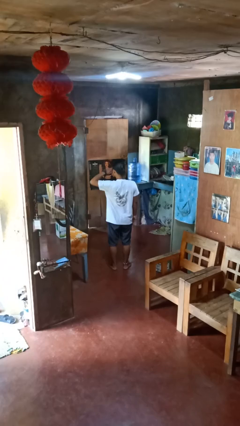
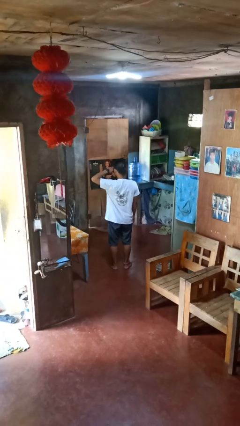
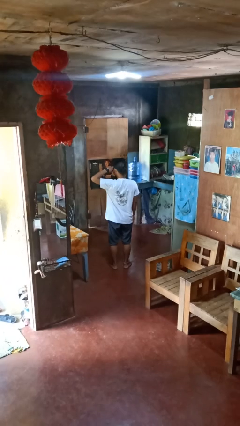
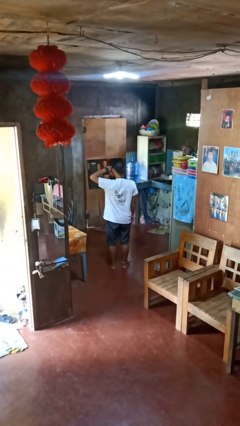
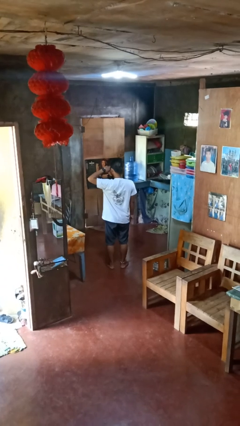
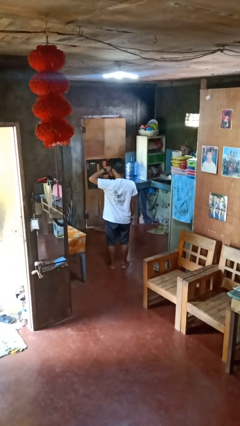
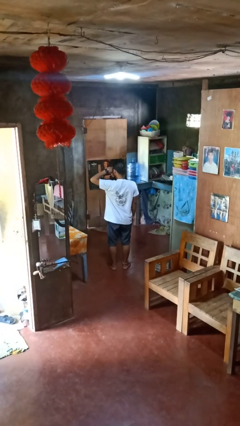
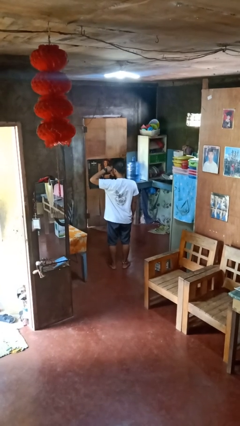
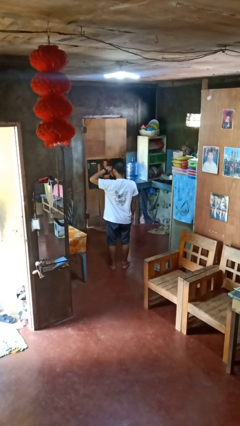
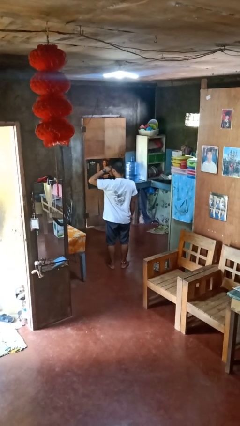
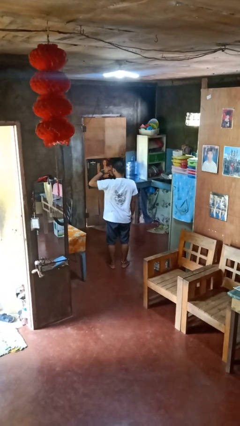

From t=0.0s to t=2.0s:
person rubs eyes

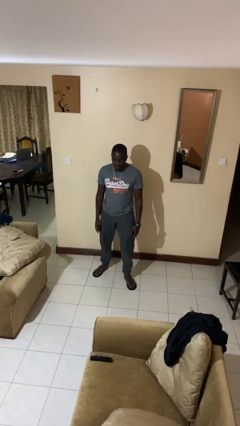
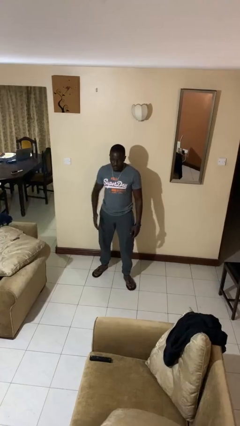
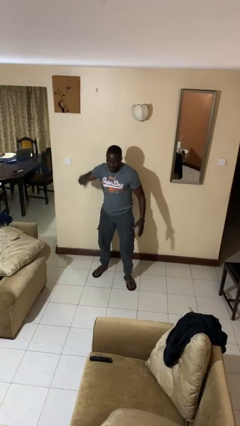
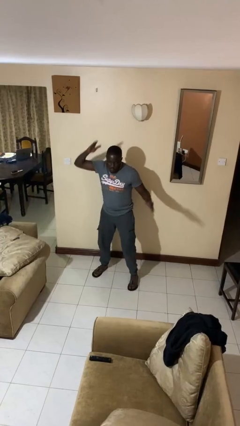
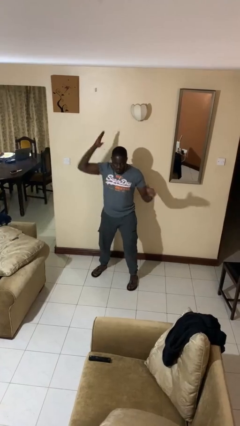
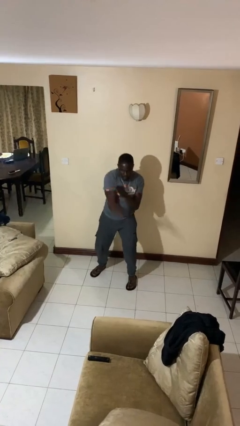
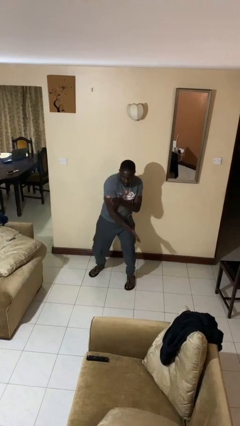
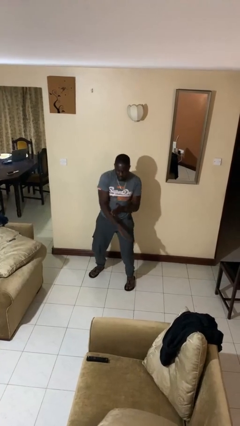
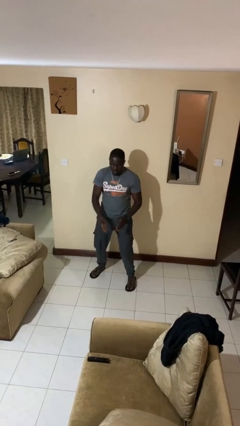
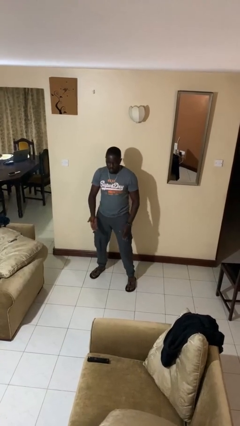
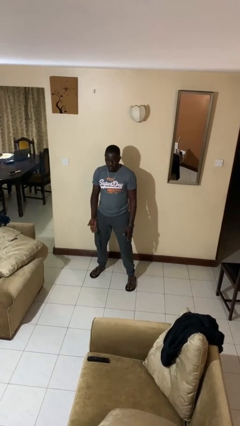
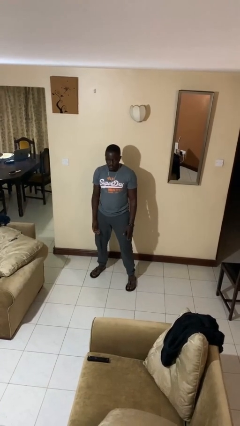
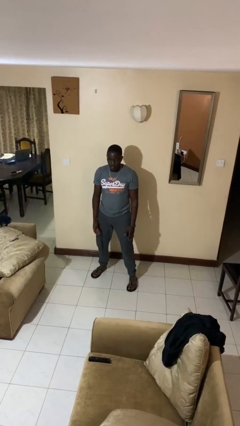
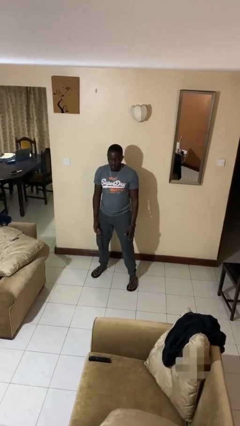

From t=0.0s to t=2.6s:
person karate chop

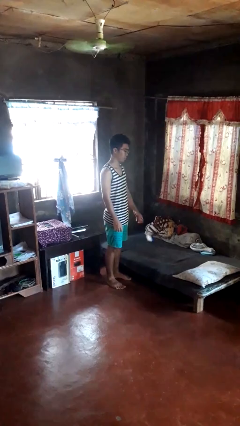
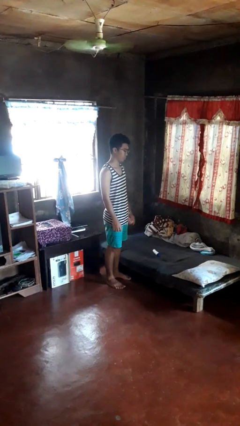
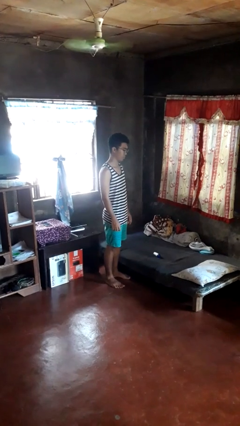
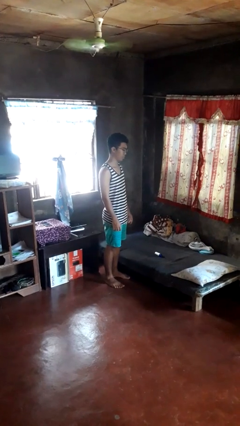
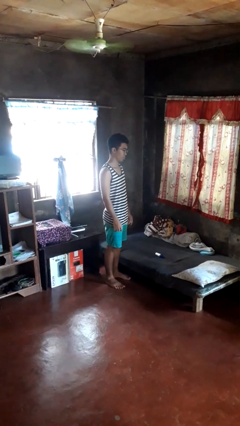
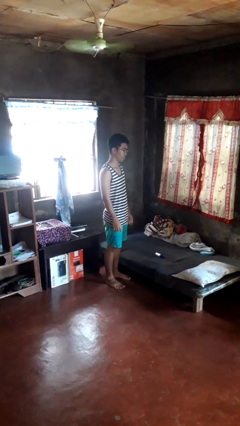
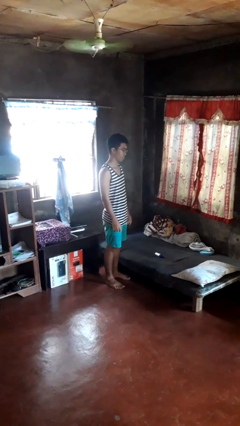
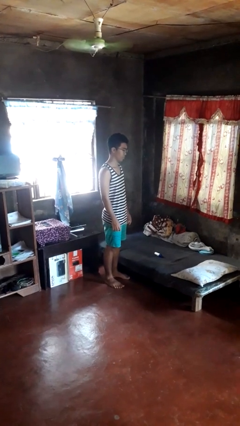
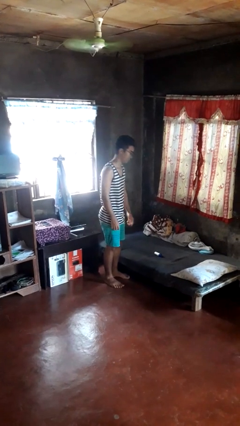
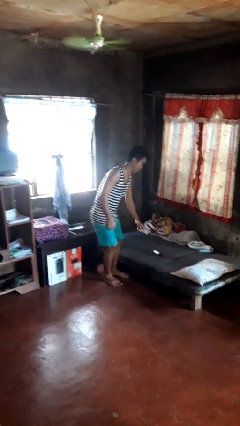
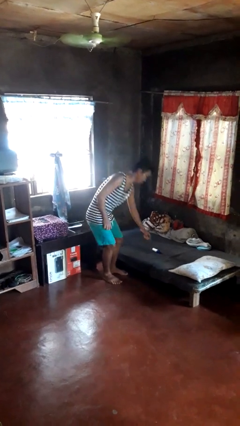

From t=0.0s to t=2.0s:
person throws object on bed

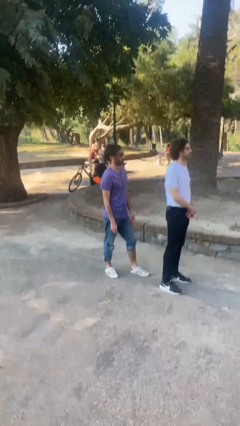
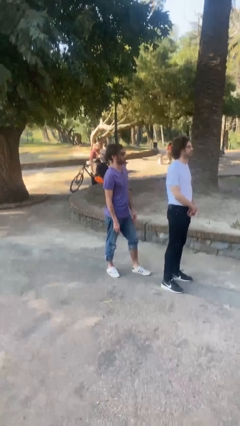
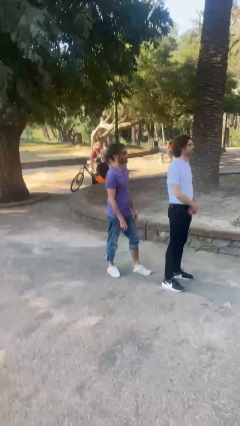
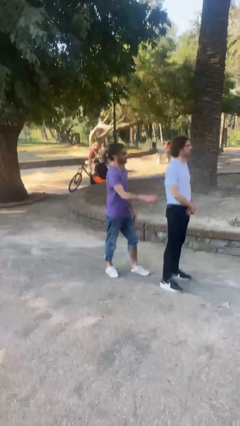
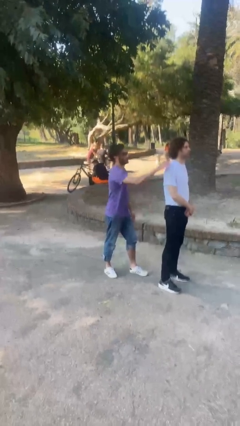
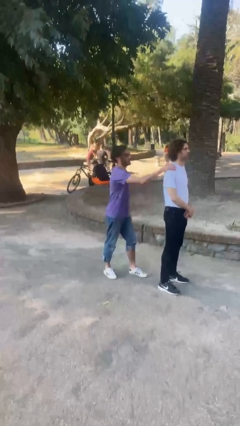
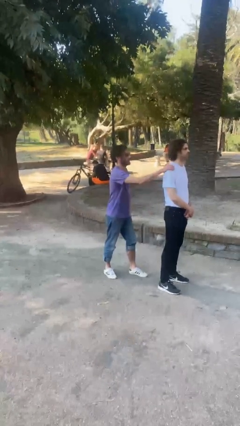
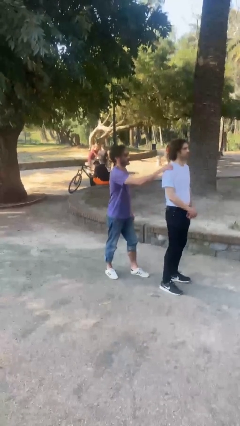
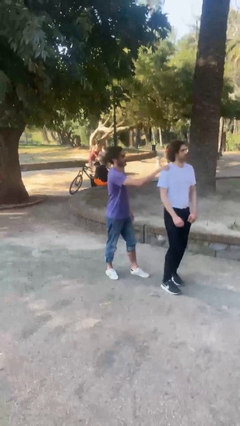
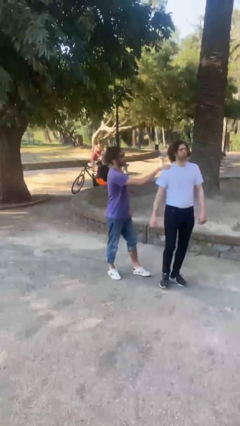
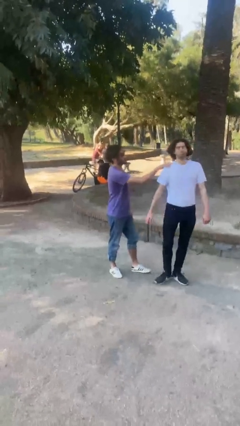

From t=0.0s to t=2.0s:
person grabs person by shoulder

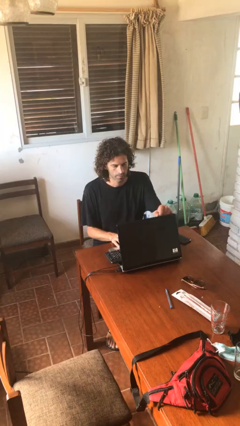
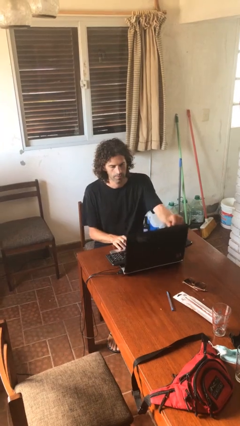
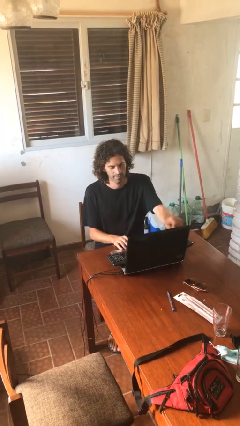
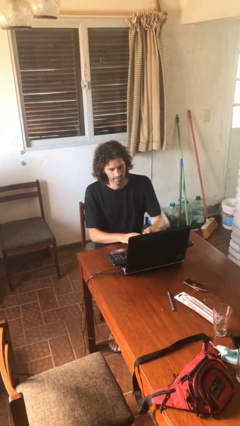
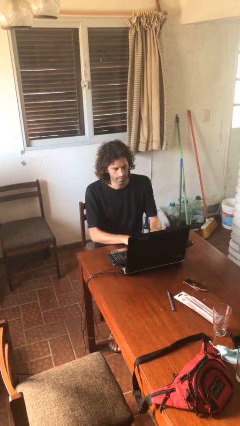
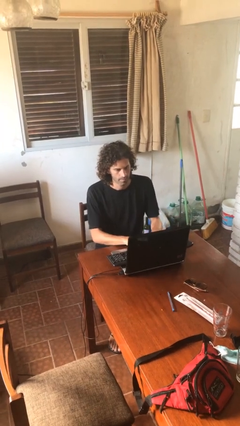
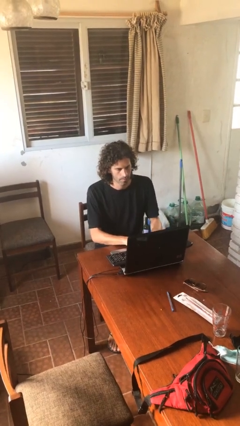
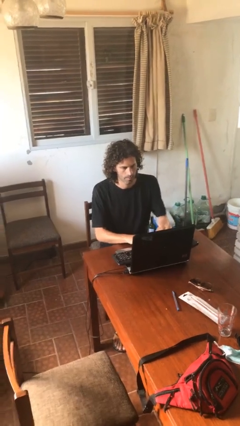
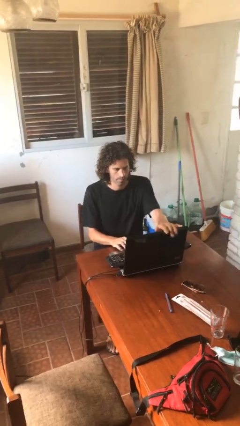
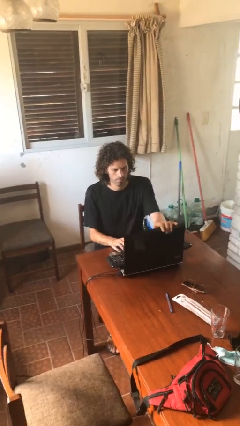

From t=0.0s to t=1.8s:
person interacts with laptop

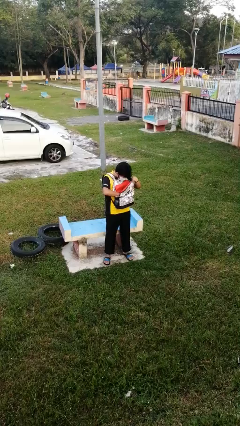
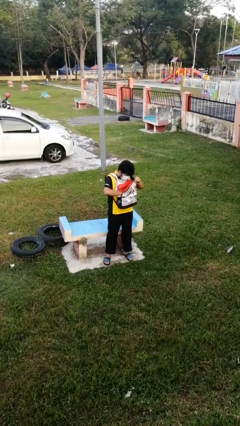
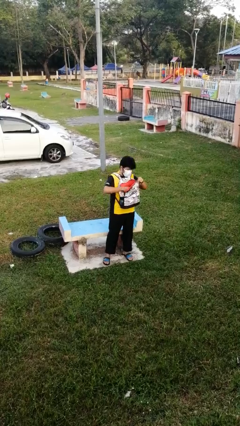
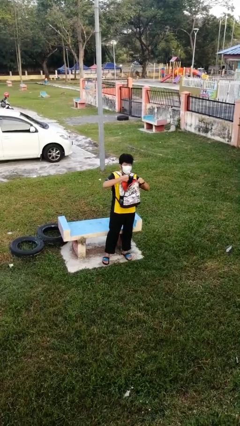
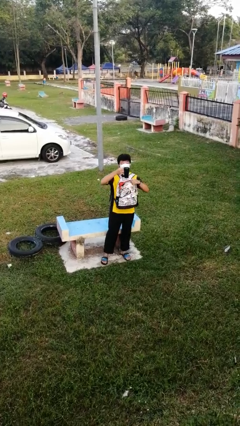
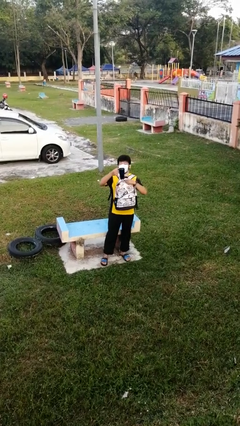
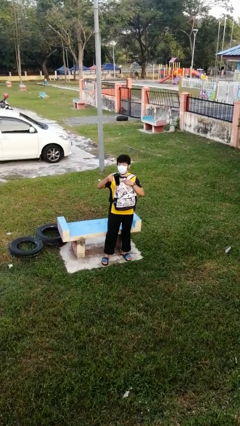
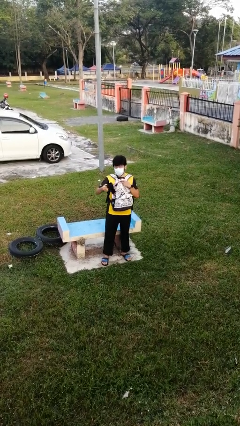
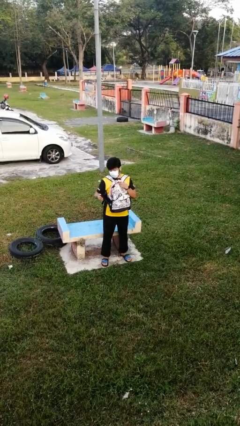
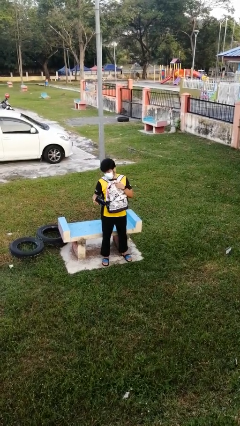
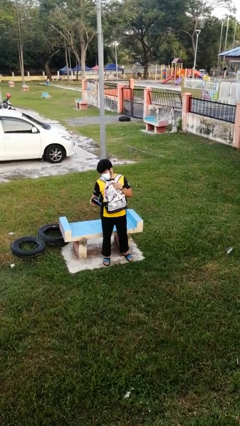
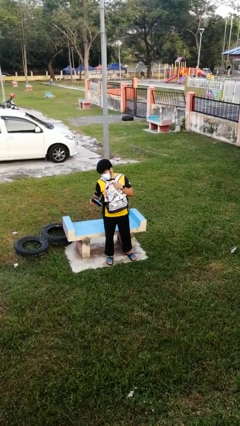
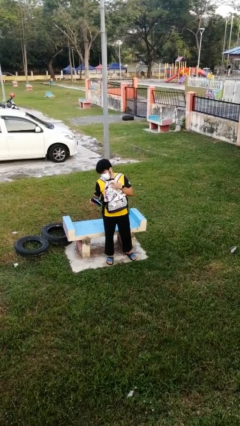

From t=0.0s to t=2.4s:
person takes object from backpack

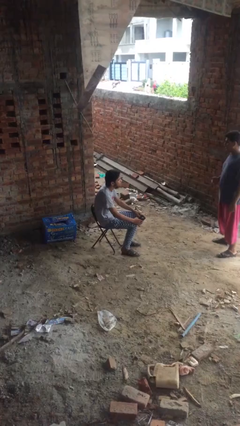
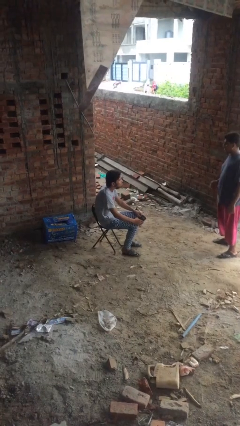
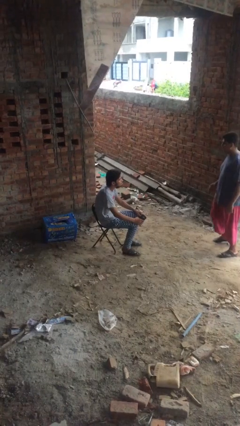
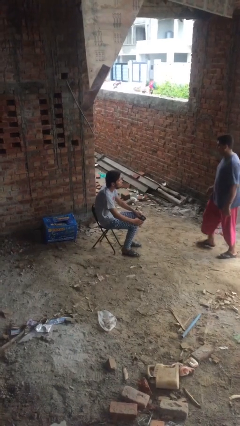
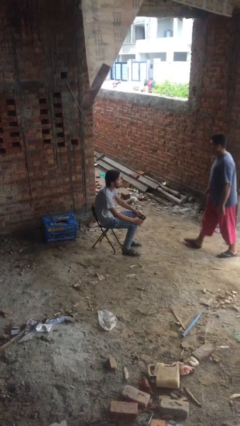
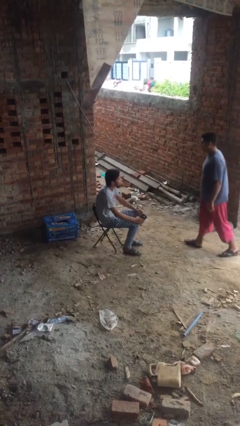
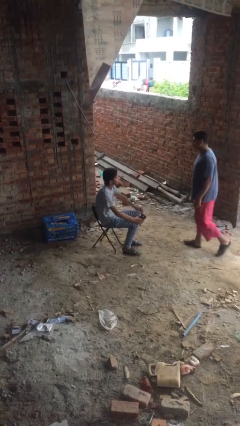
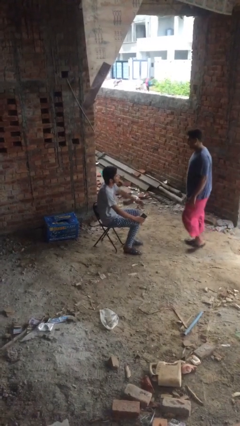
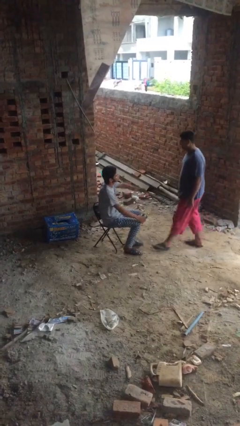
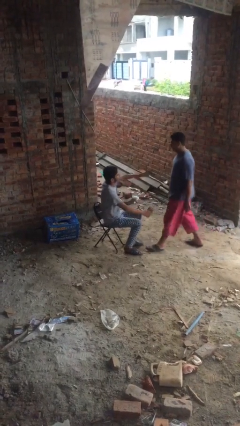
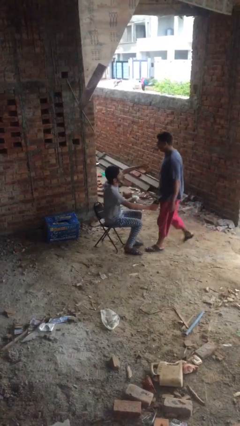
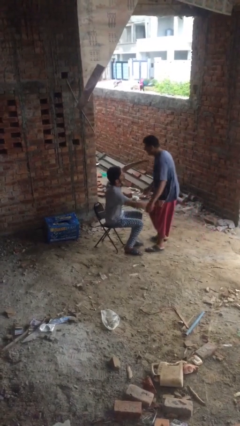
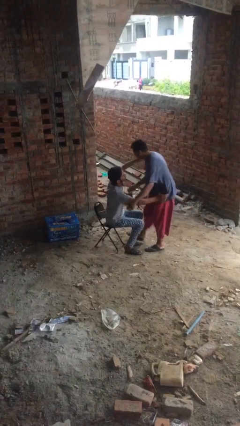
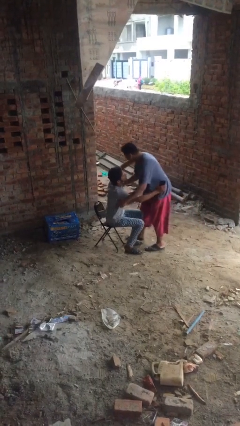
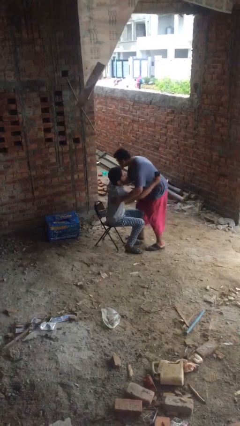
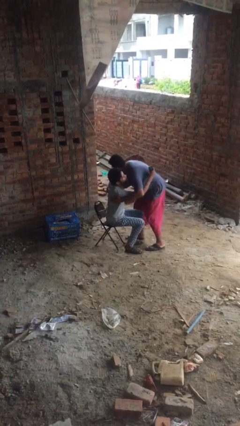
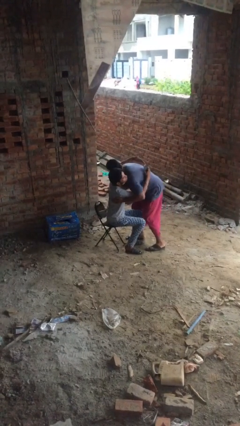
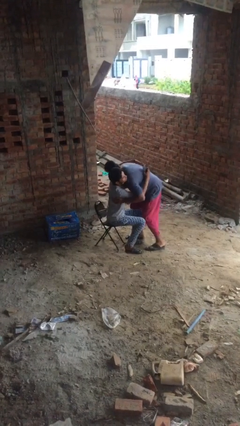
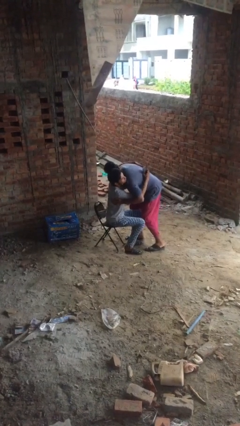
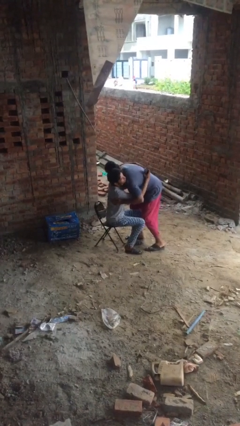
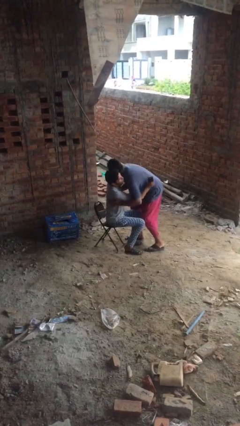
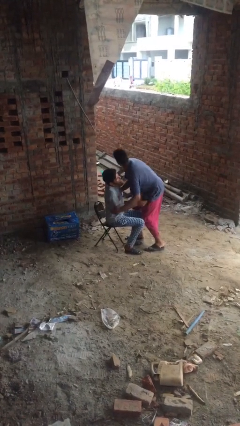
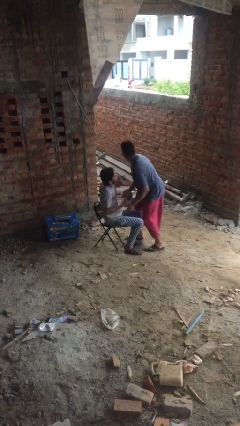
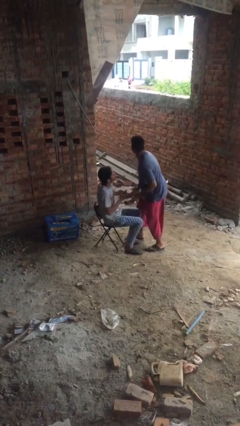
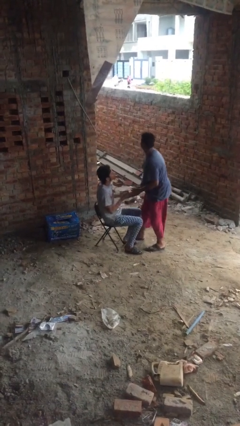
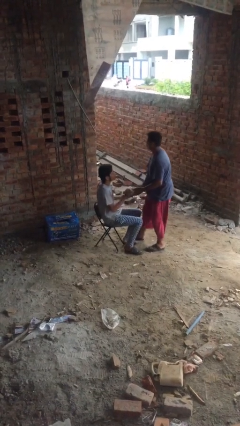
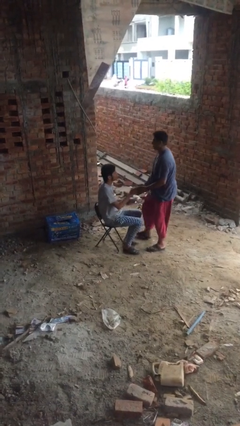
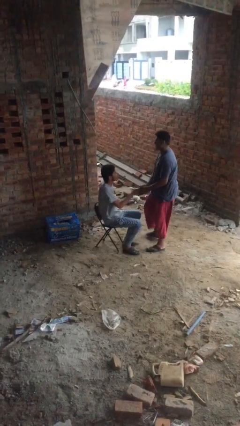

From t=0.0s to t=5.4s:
person embraces person
